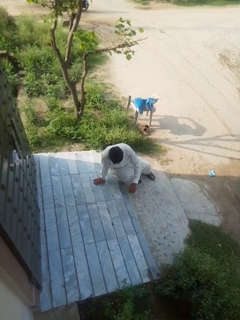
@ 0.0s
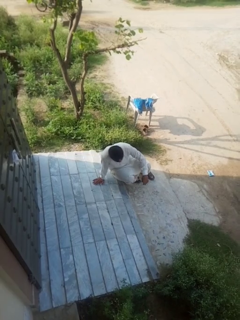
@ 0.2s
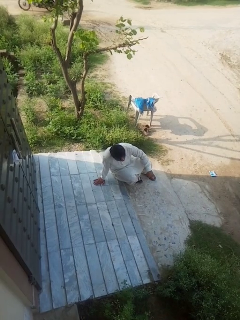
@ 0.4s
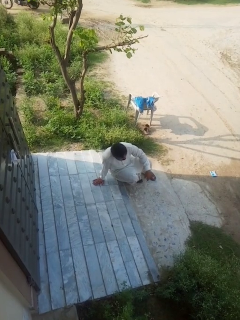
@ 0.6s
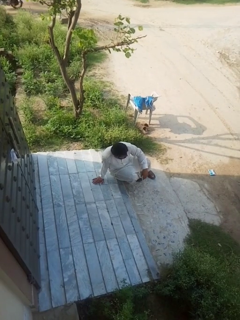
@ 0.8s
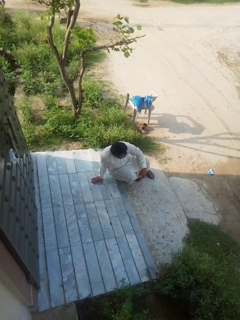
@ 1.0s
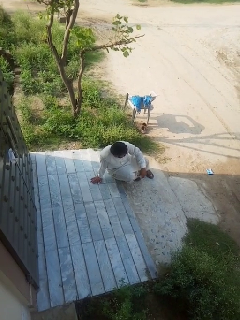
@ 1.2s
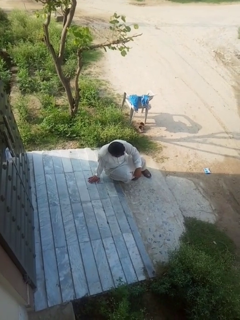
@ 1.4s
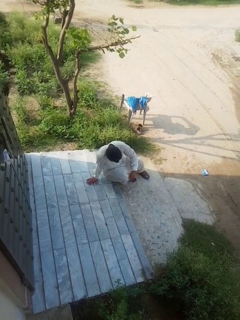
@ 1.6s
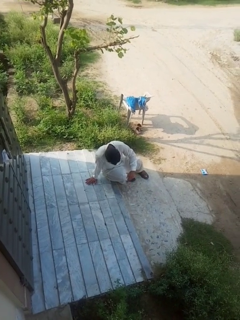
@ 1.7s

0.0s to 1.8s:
person lies down on floor

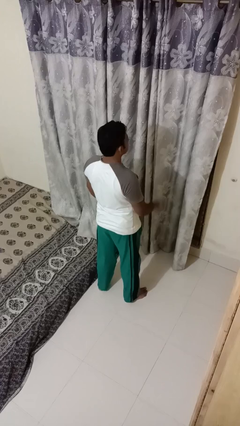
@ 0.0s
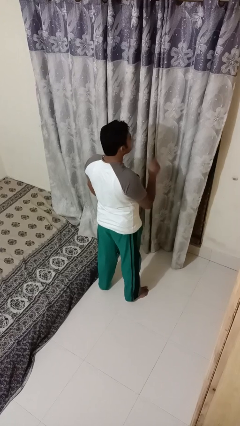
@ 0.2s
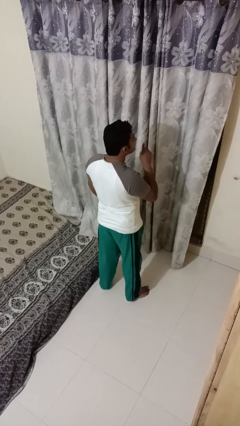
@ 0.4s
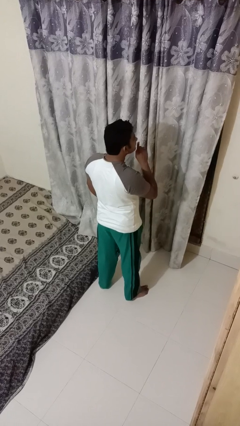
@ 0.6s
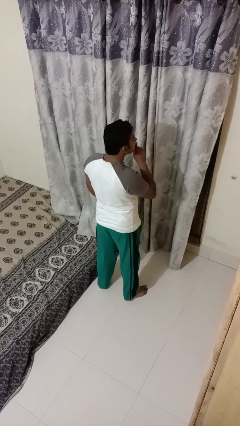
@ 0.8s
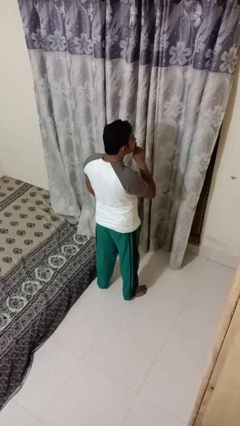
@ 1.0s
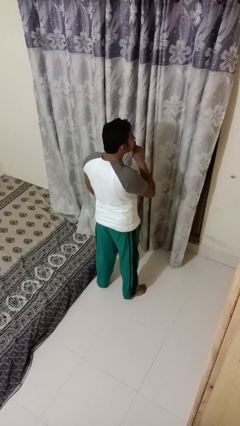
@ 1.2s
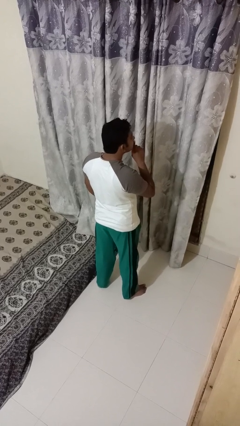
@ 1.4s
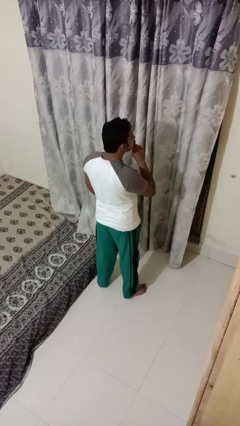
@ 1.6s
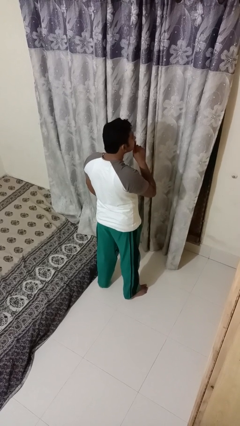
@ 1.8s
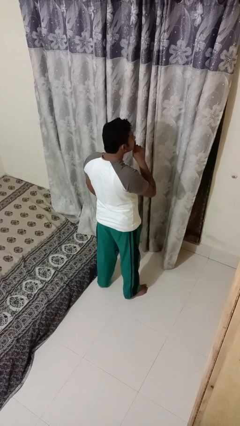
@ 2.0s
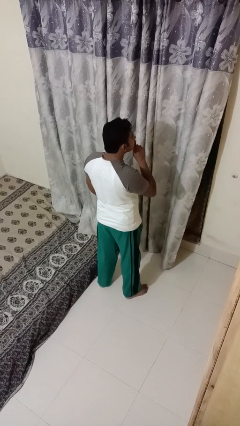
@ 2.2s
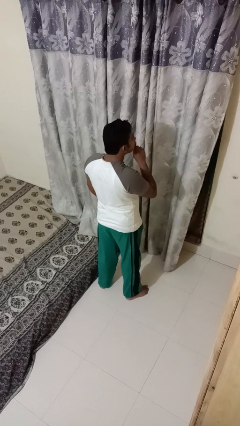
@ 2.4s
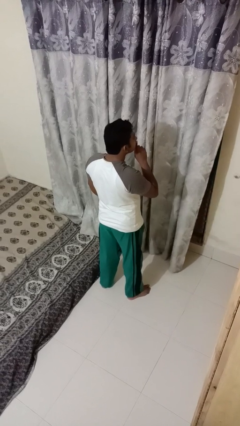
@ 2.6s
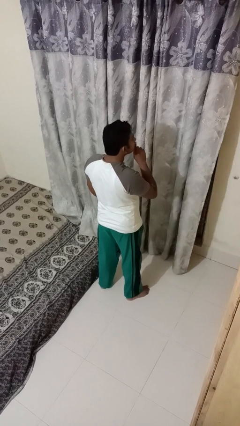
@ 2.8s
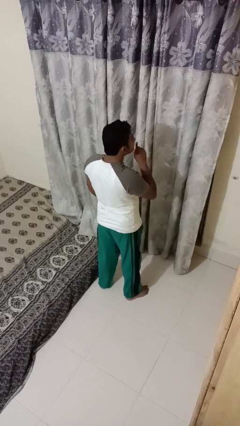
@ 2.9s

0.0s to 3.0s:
person gestures be quiet

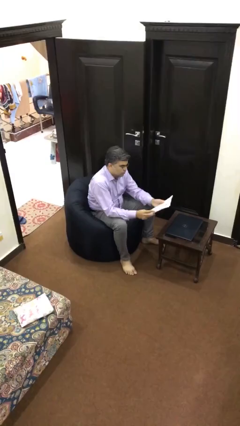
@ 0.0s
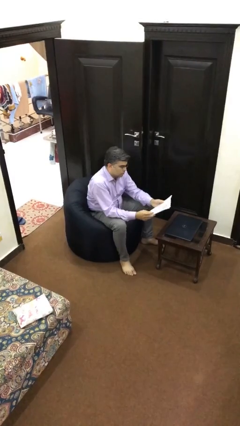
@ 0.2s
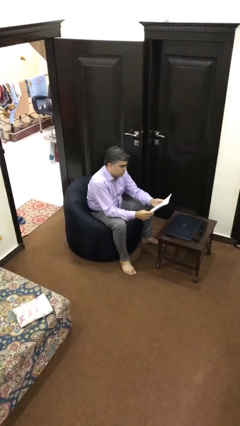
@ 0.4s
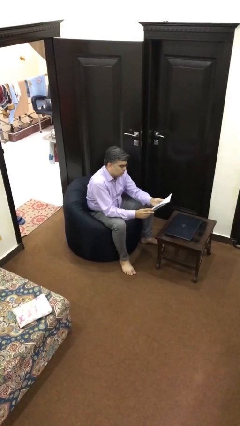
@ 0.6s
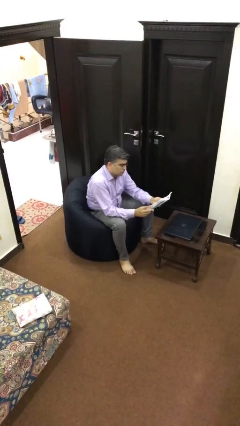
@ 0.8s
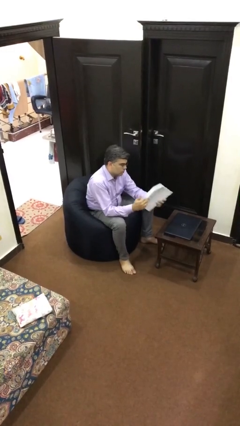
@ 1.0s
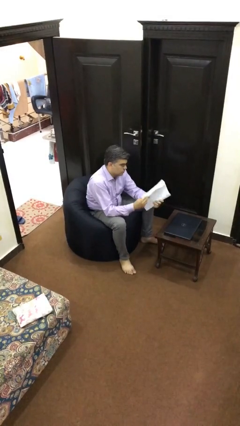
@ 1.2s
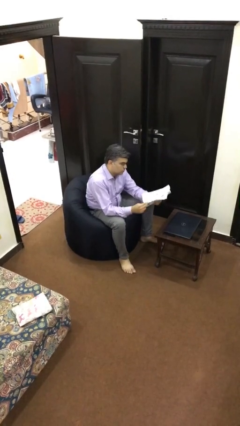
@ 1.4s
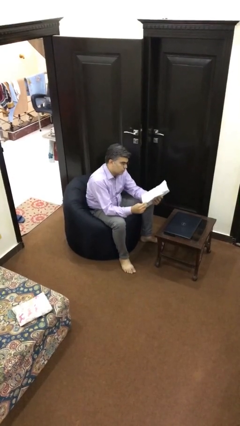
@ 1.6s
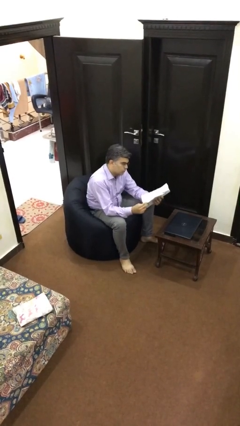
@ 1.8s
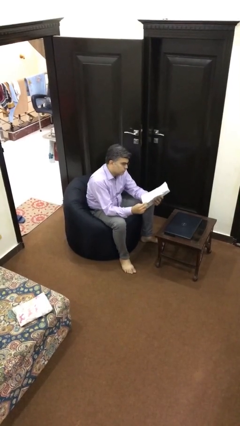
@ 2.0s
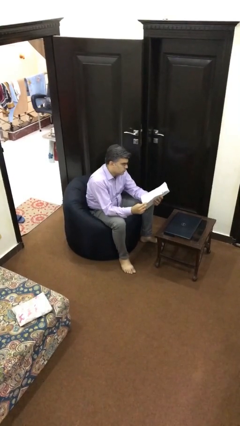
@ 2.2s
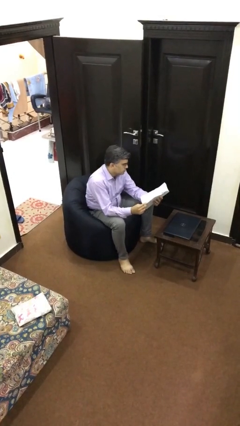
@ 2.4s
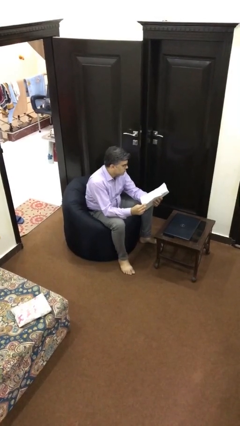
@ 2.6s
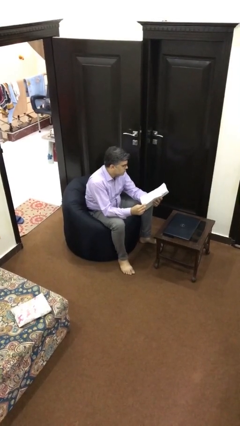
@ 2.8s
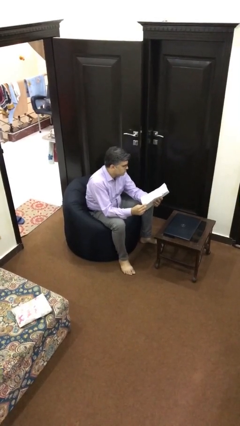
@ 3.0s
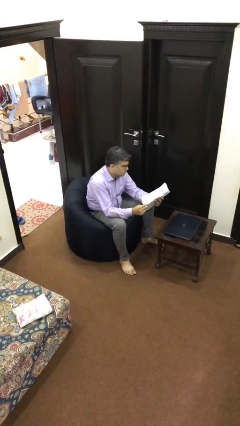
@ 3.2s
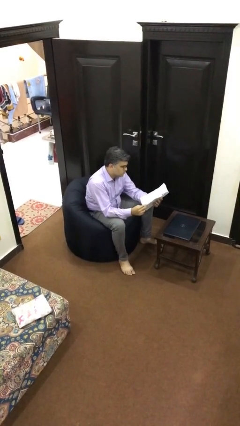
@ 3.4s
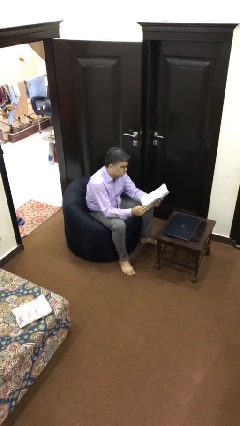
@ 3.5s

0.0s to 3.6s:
person reads document

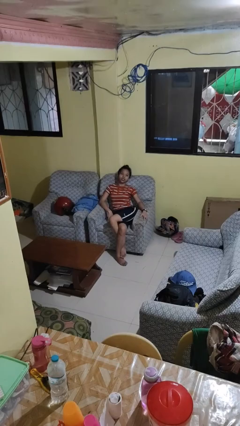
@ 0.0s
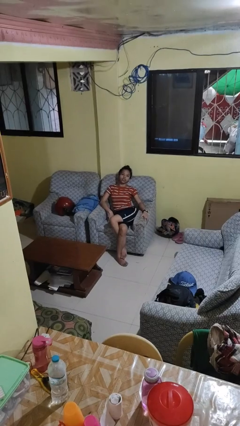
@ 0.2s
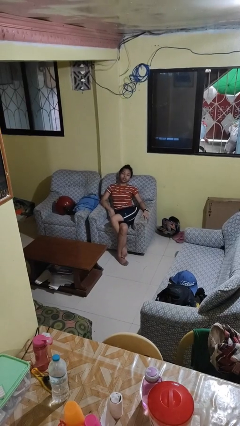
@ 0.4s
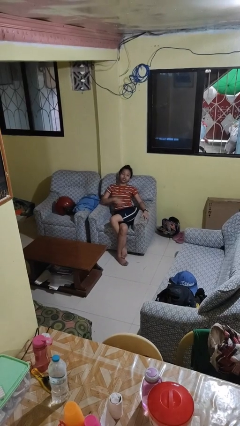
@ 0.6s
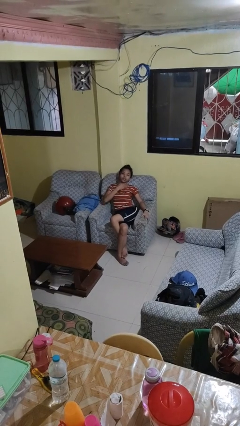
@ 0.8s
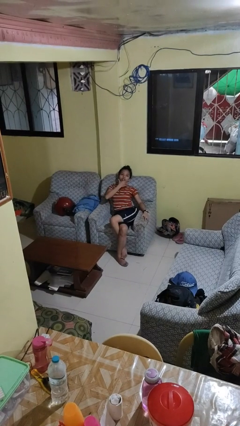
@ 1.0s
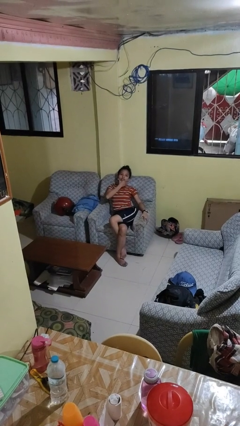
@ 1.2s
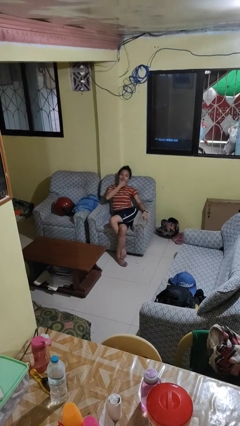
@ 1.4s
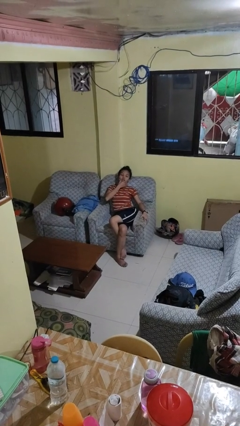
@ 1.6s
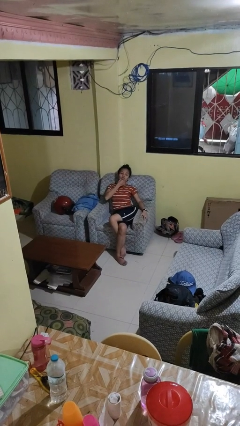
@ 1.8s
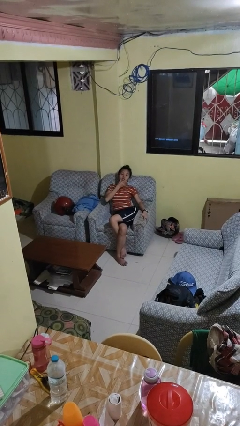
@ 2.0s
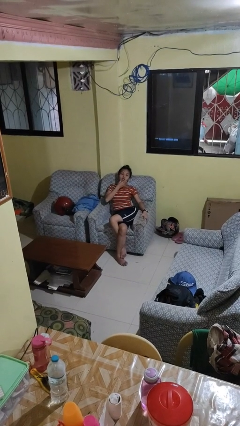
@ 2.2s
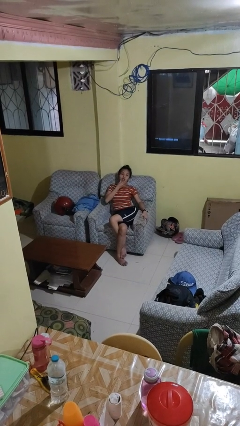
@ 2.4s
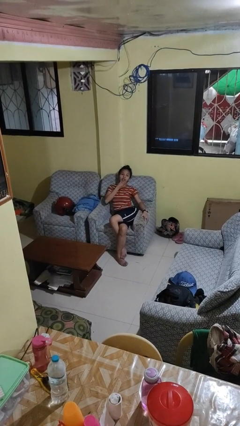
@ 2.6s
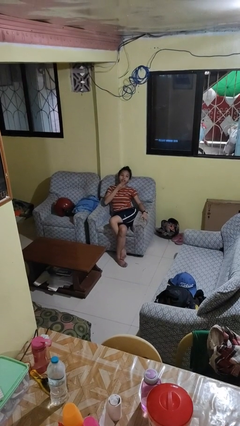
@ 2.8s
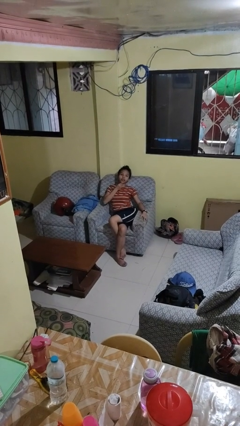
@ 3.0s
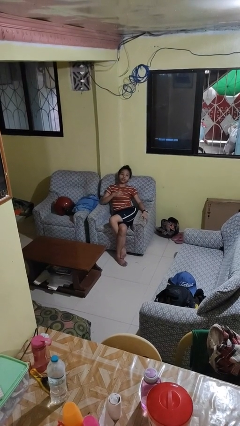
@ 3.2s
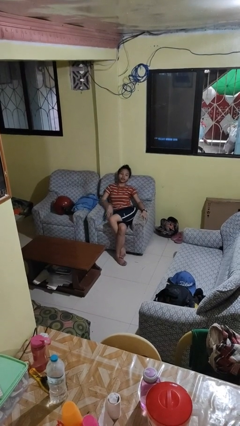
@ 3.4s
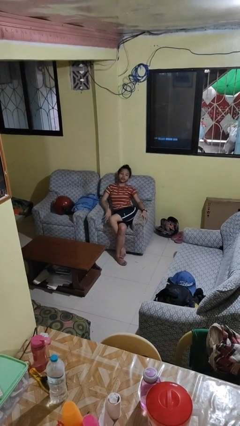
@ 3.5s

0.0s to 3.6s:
person strokes chin

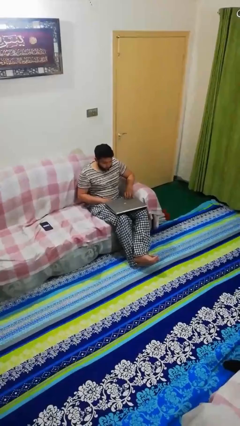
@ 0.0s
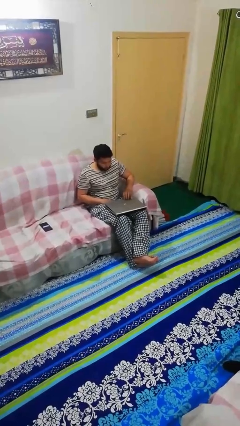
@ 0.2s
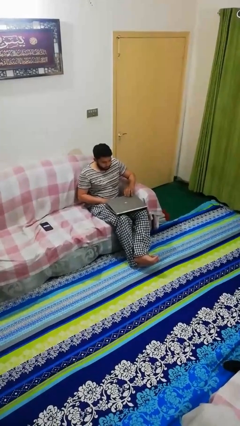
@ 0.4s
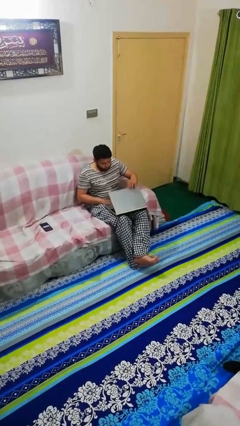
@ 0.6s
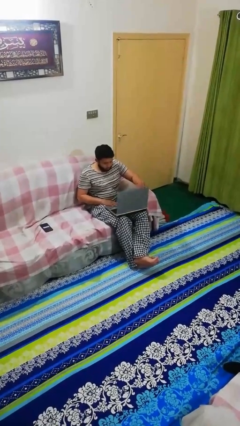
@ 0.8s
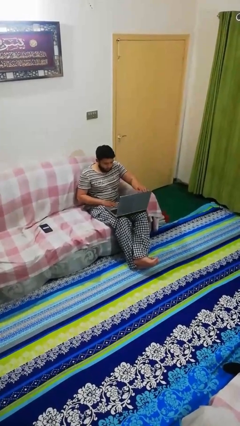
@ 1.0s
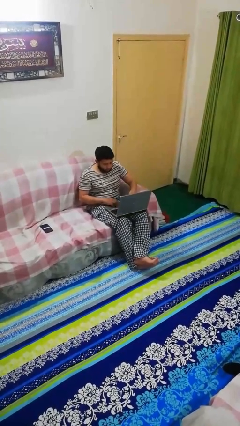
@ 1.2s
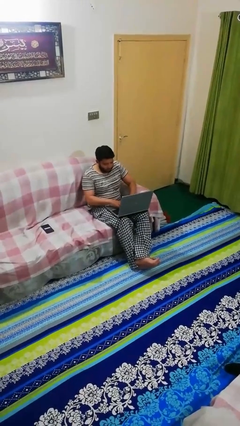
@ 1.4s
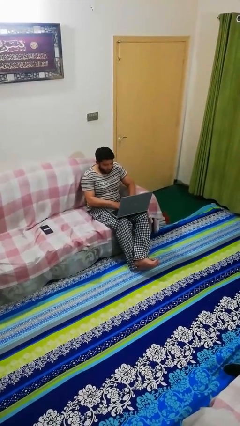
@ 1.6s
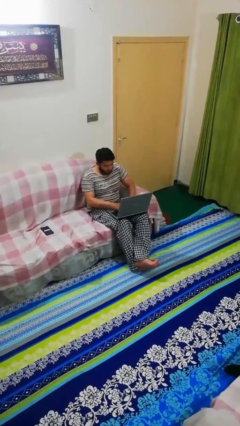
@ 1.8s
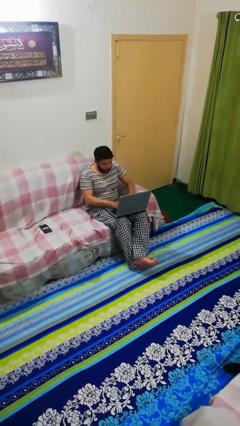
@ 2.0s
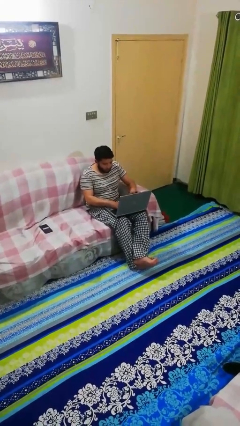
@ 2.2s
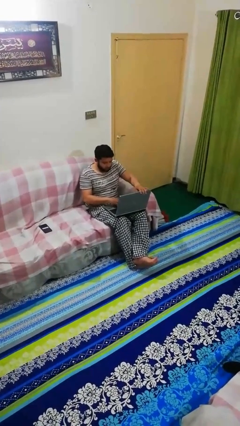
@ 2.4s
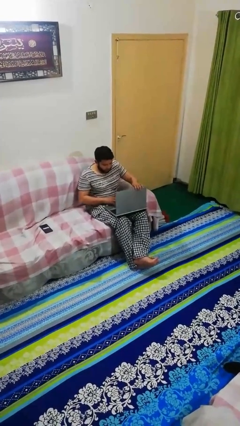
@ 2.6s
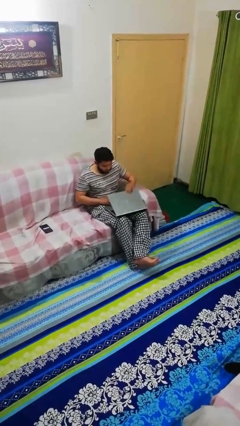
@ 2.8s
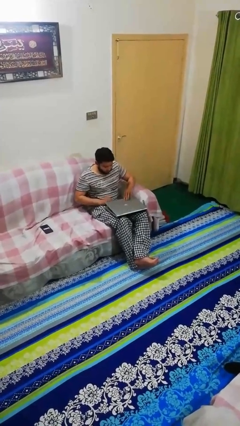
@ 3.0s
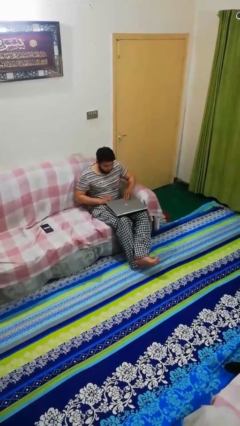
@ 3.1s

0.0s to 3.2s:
person interacts with laptop

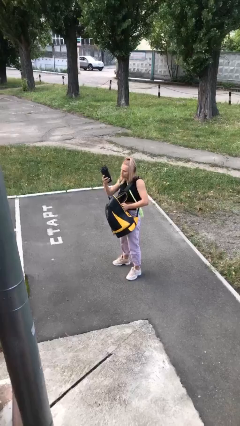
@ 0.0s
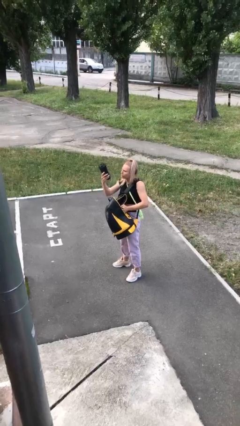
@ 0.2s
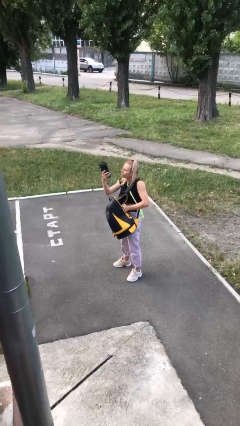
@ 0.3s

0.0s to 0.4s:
person takes object from backpack

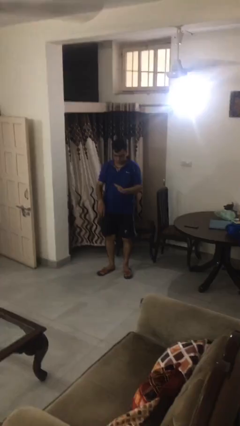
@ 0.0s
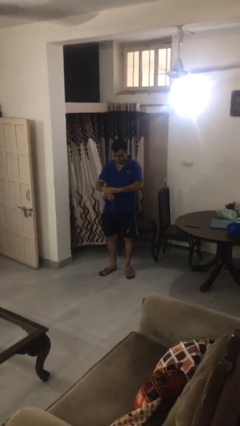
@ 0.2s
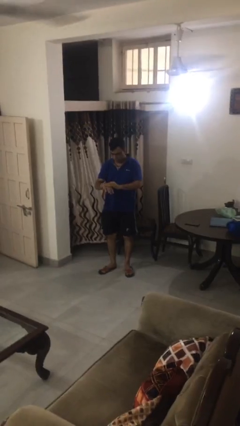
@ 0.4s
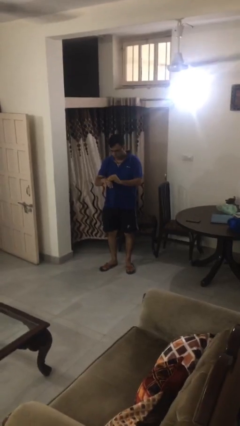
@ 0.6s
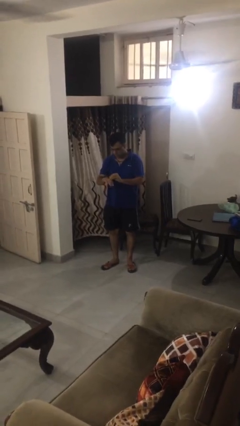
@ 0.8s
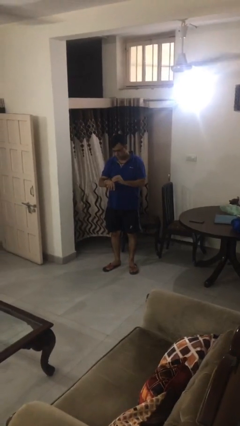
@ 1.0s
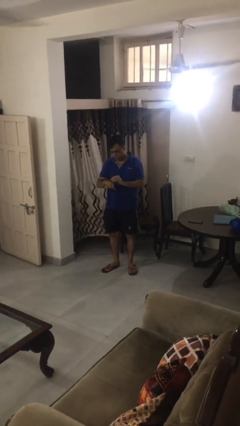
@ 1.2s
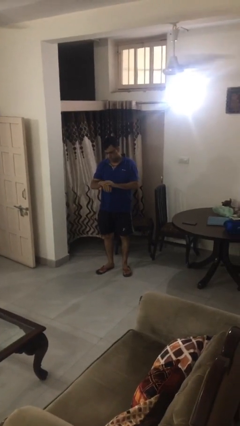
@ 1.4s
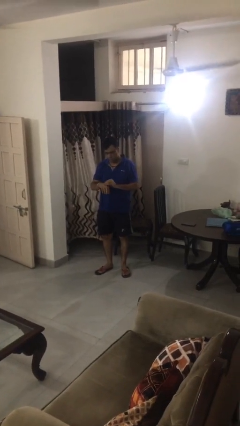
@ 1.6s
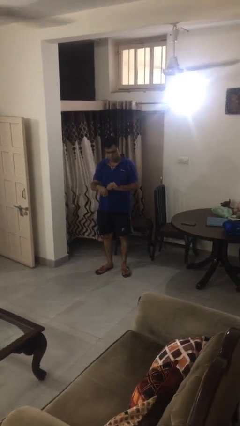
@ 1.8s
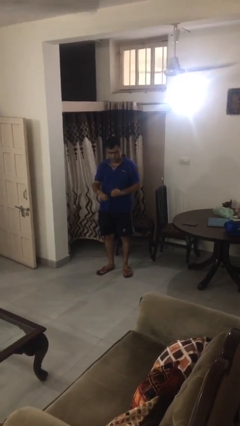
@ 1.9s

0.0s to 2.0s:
person swats bug

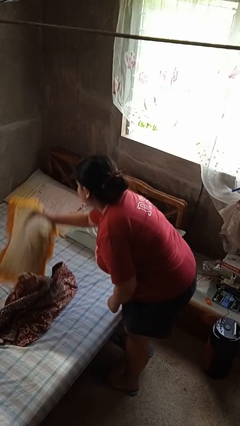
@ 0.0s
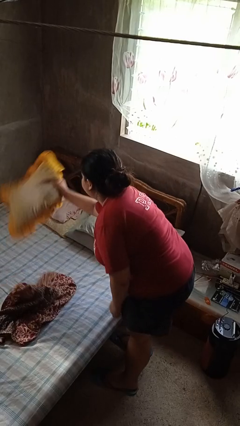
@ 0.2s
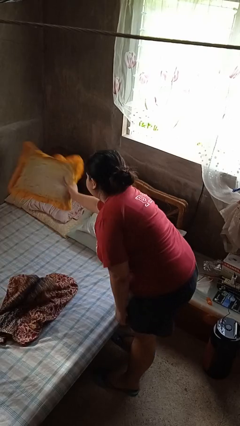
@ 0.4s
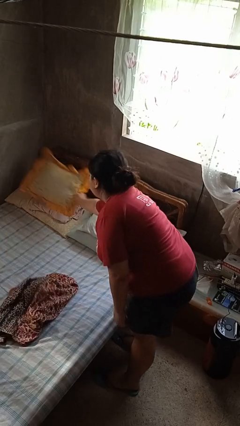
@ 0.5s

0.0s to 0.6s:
person makes bed
